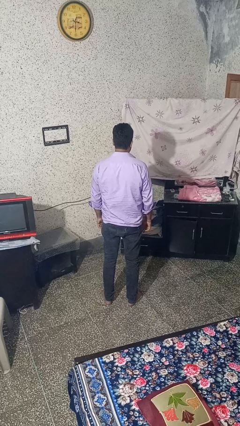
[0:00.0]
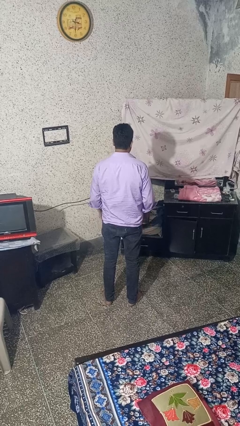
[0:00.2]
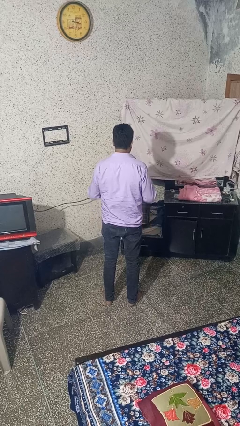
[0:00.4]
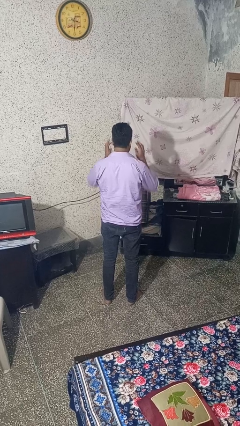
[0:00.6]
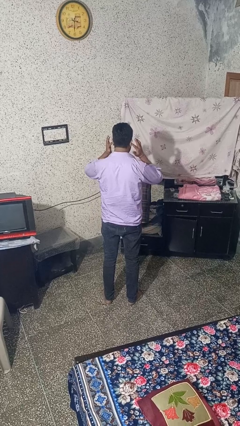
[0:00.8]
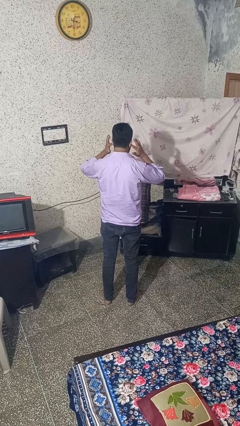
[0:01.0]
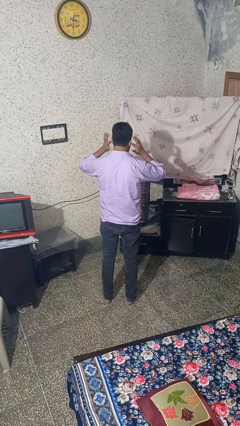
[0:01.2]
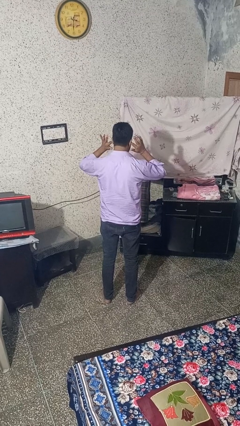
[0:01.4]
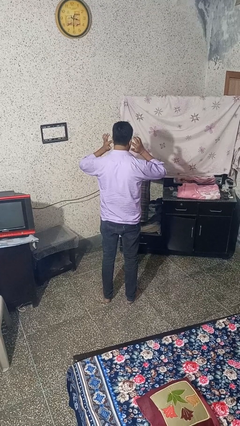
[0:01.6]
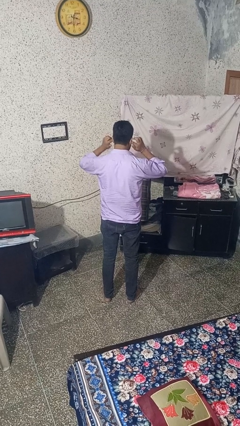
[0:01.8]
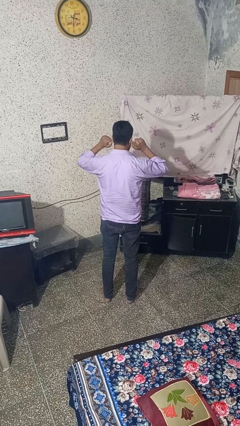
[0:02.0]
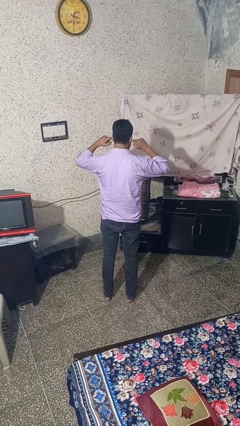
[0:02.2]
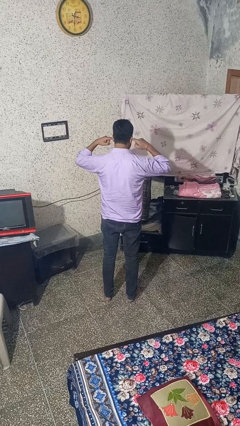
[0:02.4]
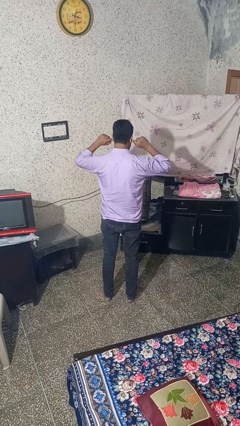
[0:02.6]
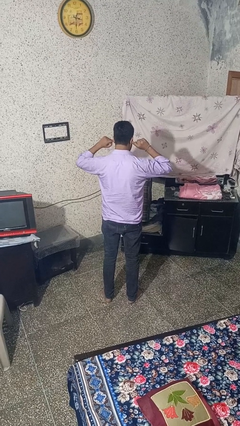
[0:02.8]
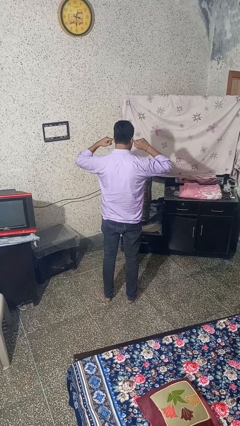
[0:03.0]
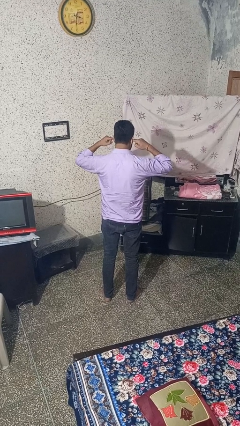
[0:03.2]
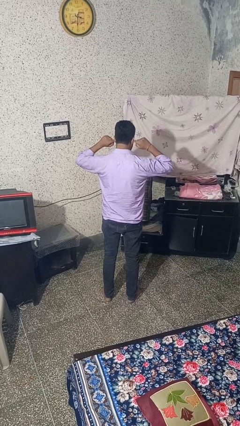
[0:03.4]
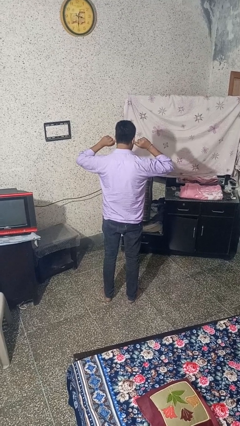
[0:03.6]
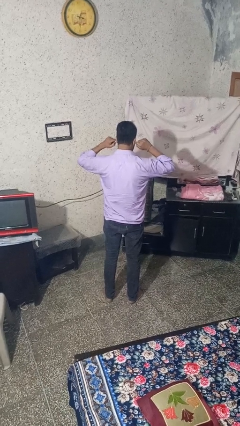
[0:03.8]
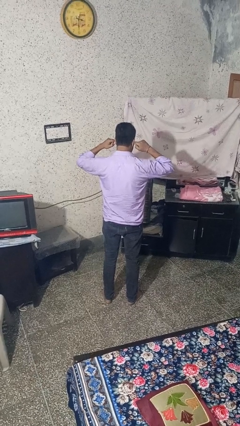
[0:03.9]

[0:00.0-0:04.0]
person puts fingers in ear

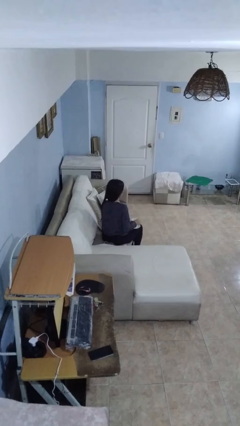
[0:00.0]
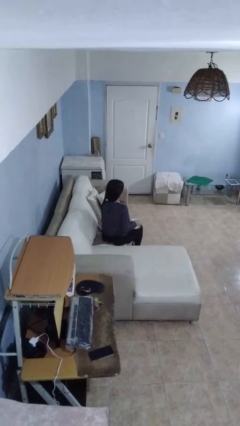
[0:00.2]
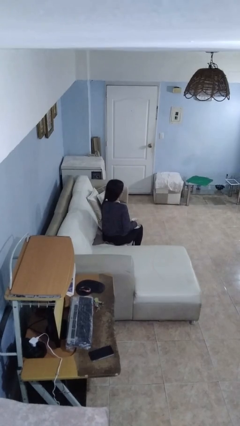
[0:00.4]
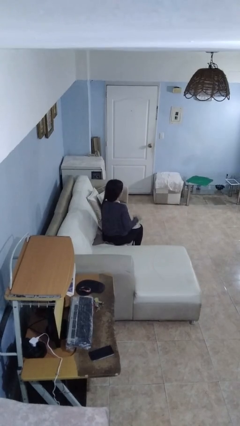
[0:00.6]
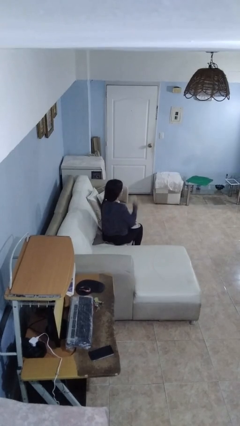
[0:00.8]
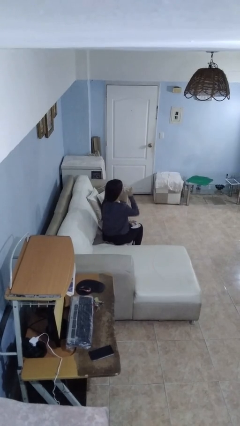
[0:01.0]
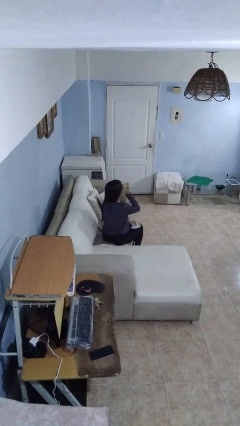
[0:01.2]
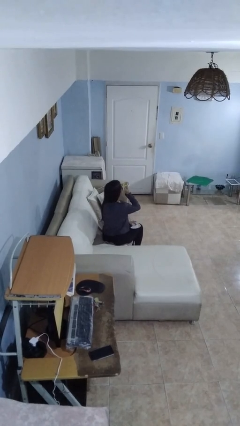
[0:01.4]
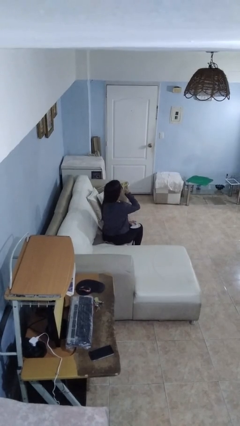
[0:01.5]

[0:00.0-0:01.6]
person drinks from mug

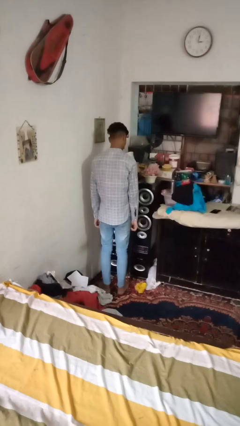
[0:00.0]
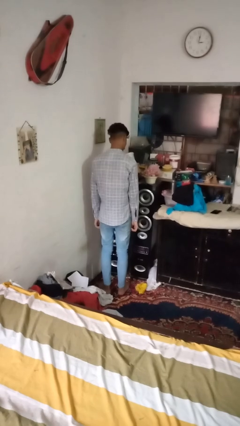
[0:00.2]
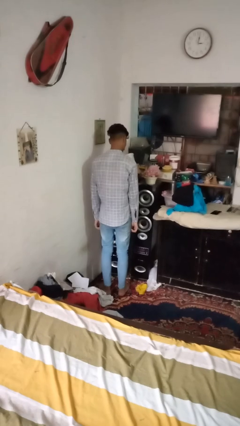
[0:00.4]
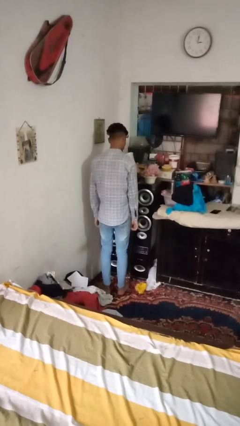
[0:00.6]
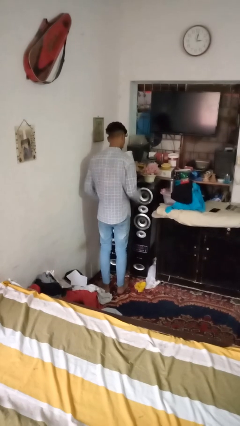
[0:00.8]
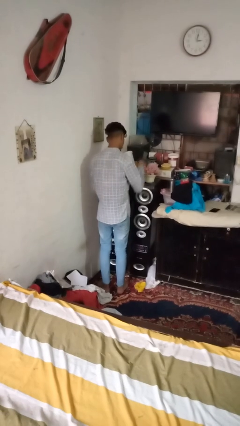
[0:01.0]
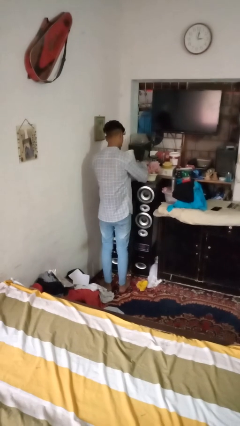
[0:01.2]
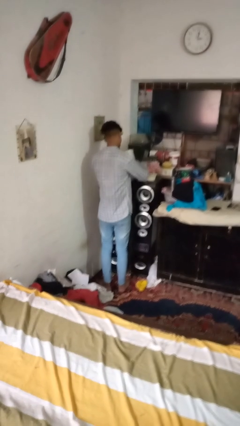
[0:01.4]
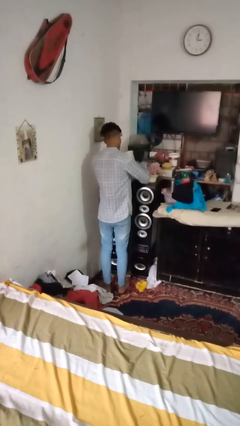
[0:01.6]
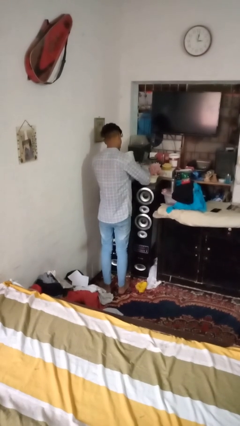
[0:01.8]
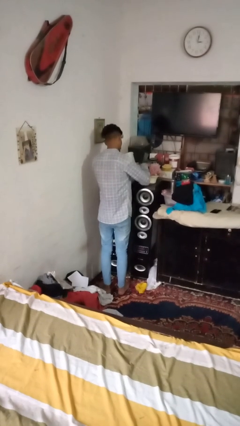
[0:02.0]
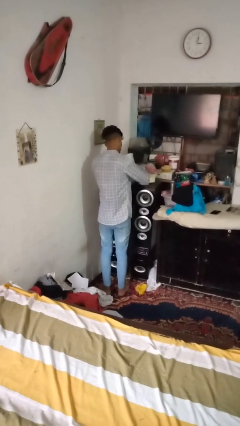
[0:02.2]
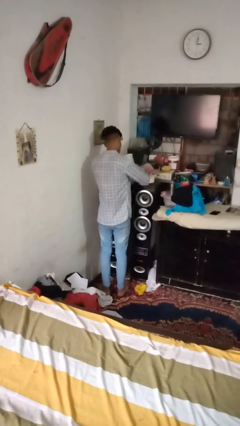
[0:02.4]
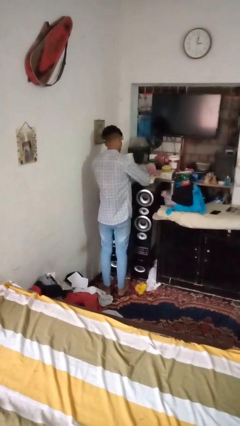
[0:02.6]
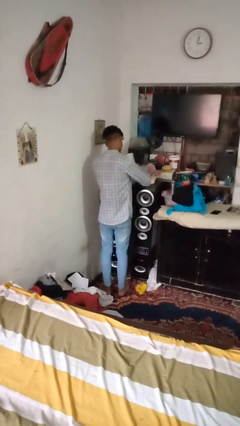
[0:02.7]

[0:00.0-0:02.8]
person arranges flowers in vase

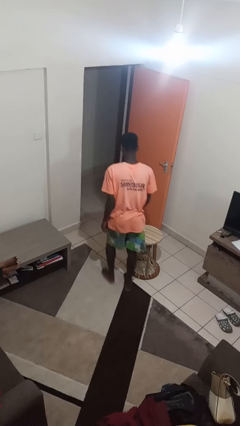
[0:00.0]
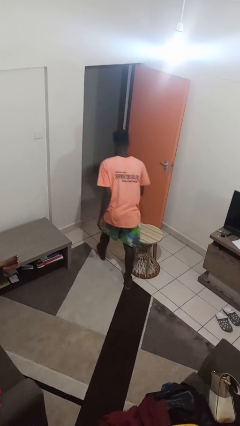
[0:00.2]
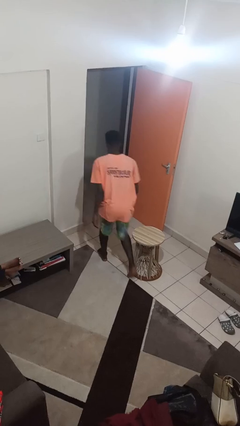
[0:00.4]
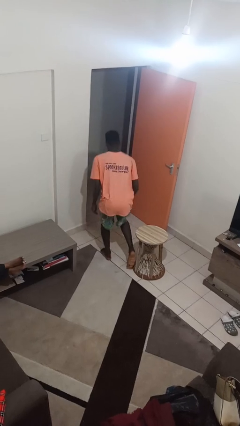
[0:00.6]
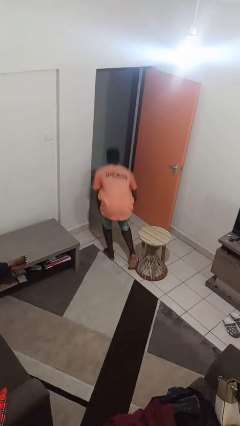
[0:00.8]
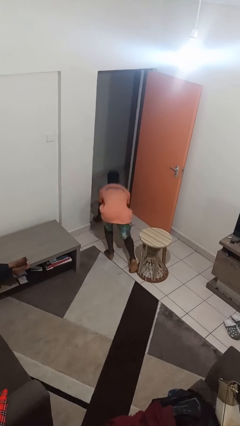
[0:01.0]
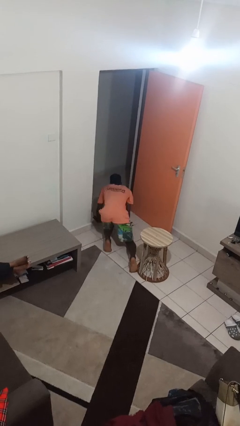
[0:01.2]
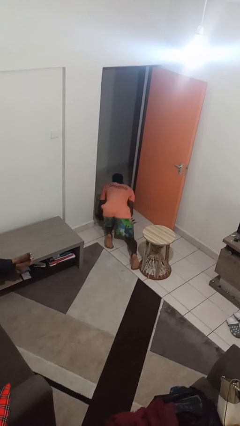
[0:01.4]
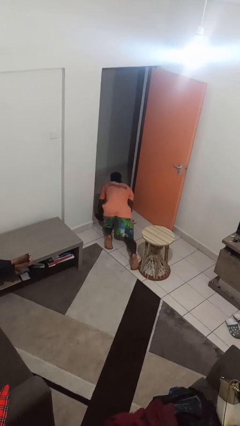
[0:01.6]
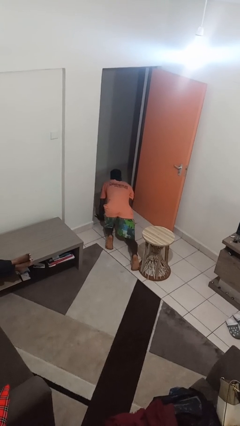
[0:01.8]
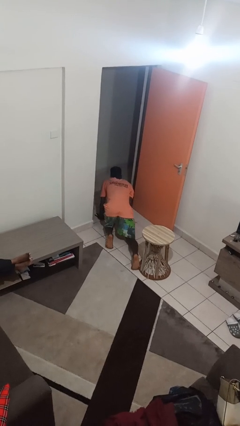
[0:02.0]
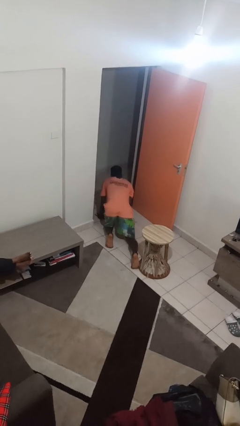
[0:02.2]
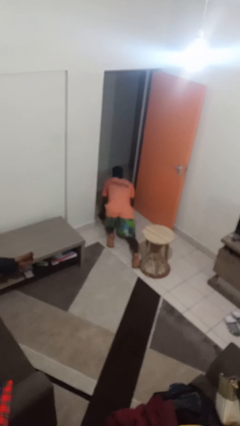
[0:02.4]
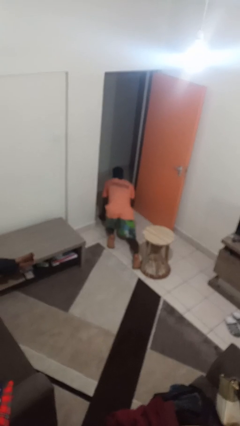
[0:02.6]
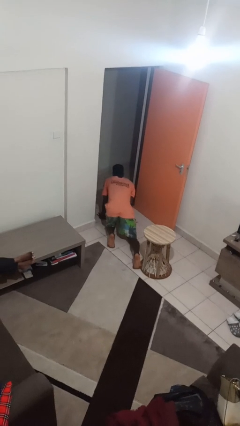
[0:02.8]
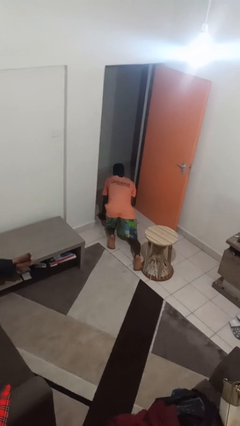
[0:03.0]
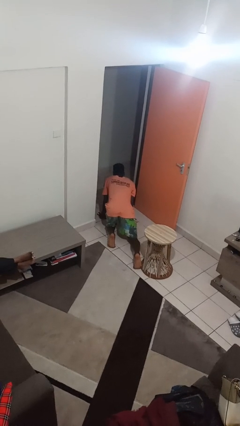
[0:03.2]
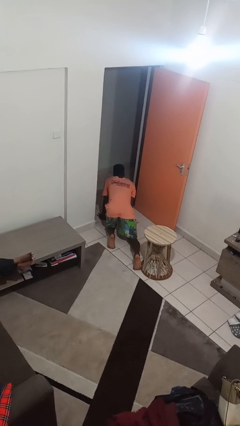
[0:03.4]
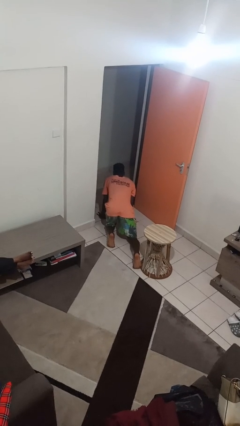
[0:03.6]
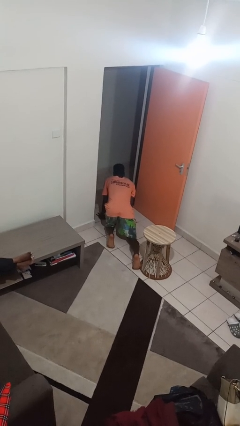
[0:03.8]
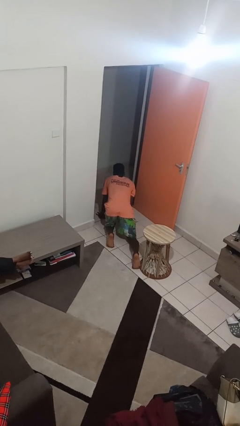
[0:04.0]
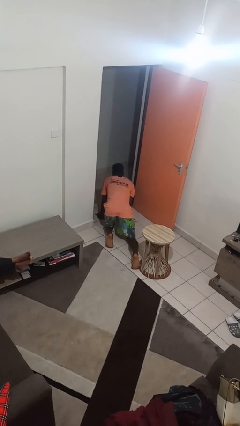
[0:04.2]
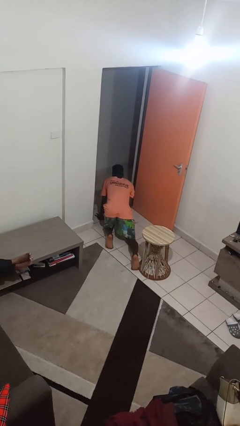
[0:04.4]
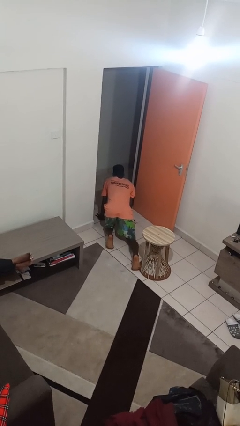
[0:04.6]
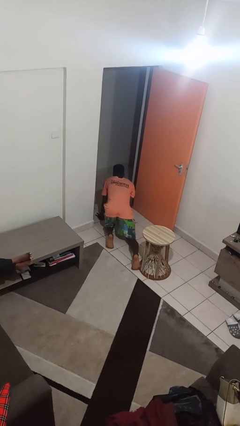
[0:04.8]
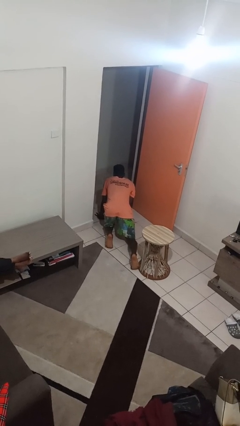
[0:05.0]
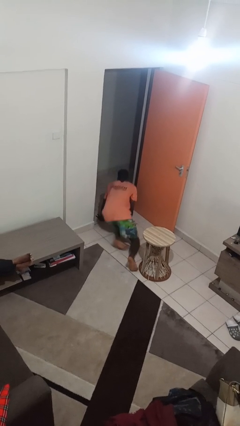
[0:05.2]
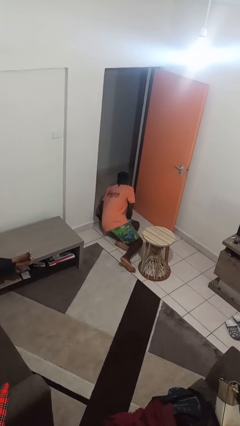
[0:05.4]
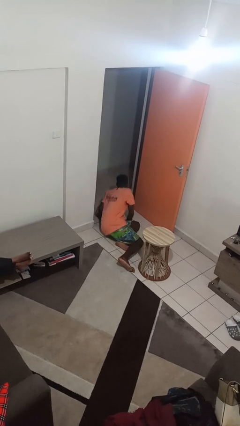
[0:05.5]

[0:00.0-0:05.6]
person trips on object on floor

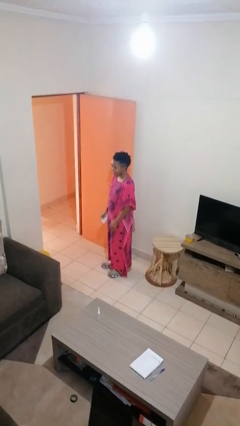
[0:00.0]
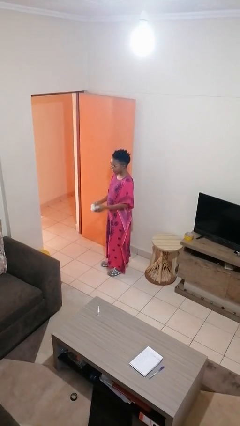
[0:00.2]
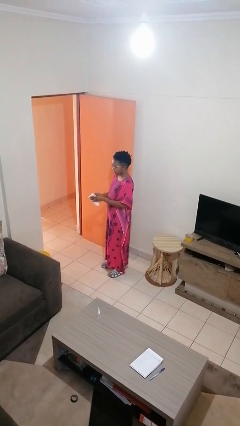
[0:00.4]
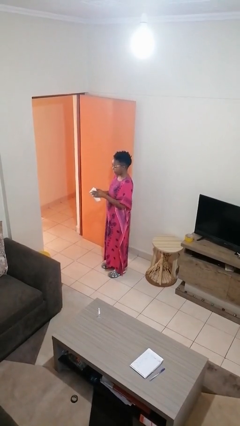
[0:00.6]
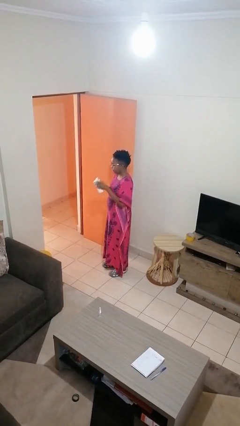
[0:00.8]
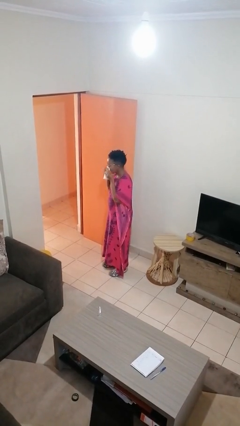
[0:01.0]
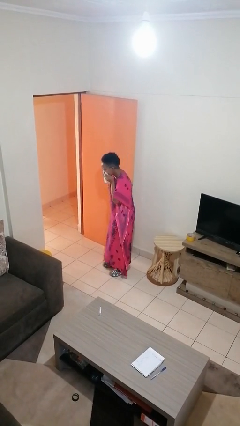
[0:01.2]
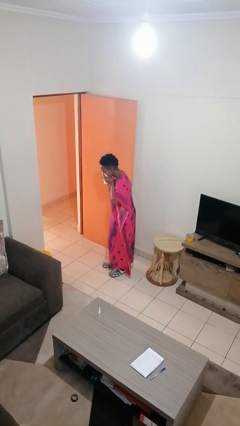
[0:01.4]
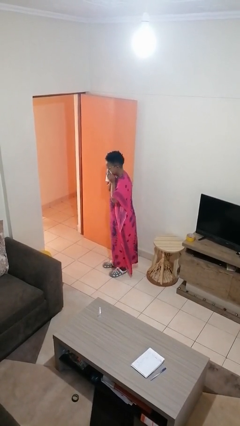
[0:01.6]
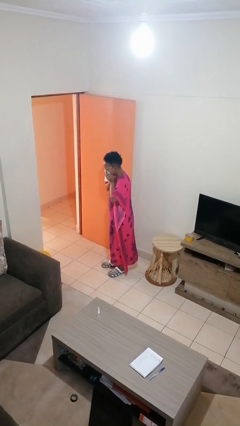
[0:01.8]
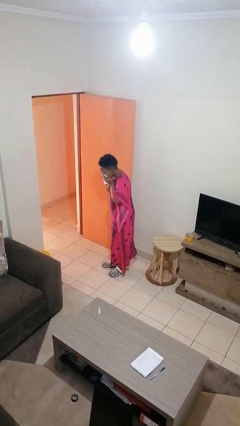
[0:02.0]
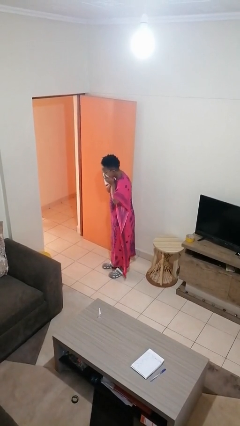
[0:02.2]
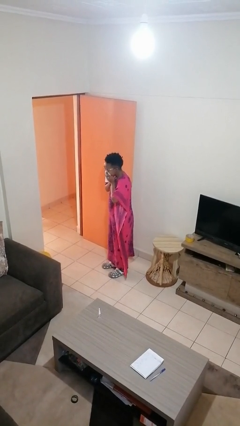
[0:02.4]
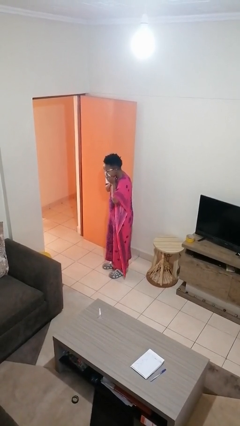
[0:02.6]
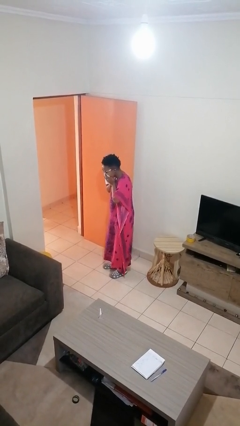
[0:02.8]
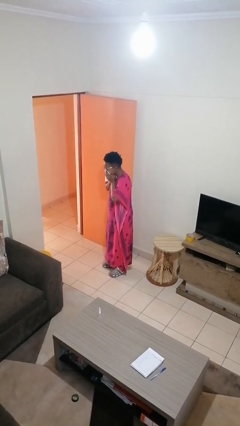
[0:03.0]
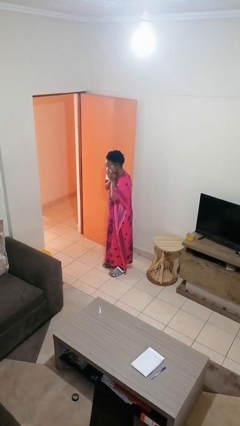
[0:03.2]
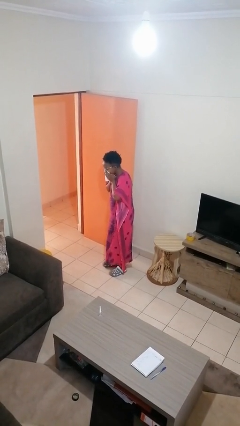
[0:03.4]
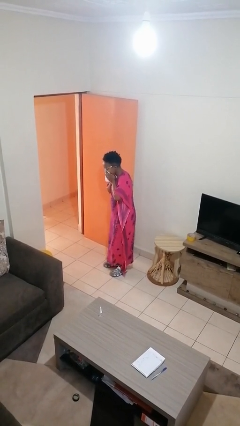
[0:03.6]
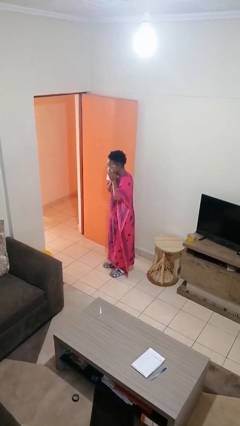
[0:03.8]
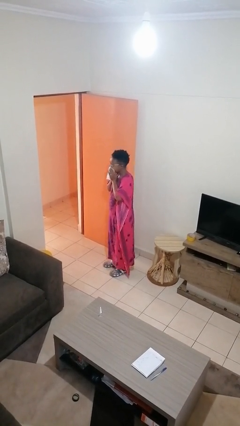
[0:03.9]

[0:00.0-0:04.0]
person blows nose
